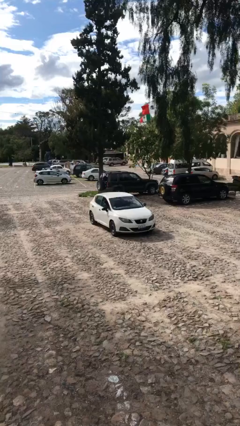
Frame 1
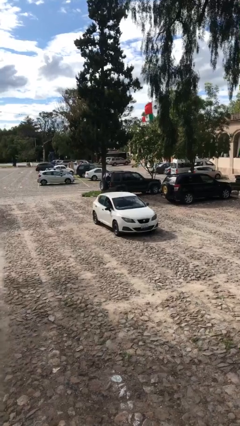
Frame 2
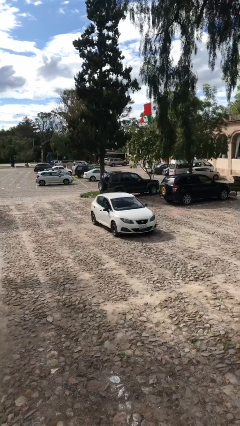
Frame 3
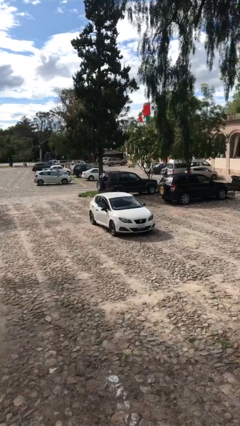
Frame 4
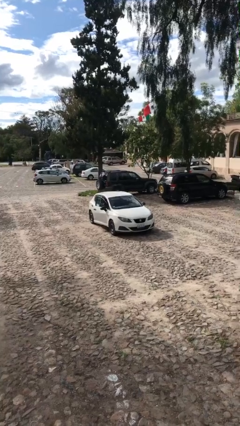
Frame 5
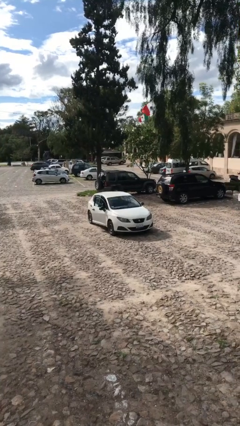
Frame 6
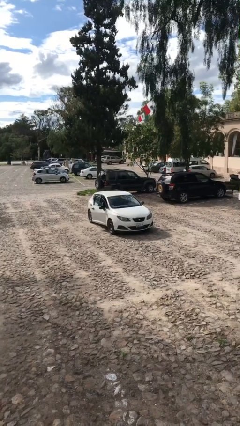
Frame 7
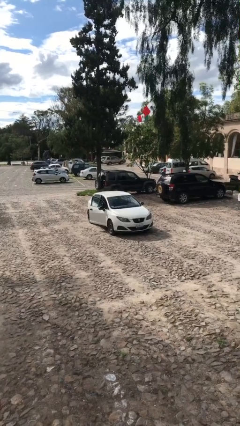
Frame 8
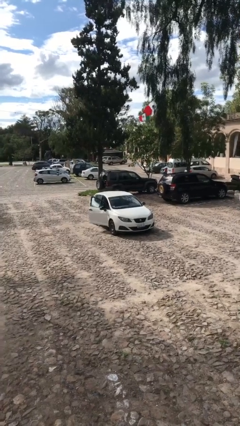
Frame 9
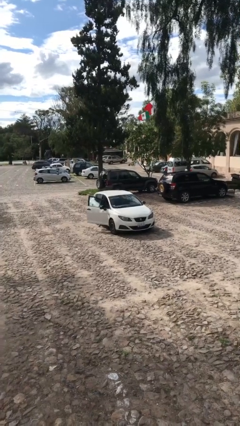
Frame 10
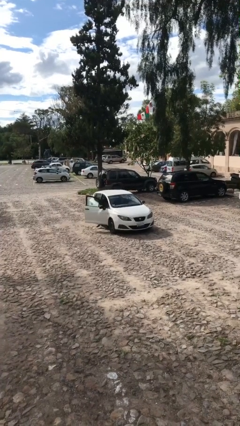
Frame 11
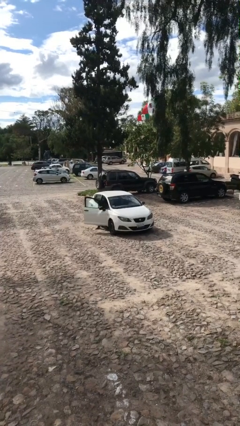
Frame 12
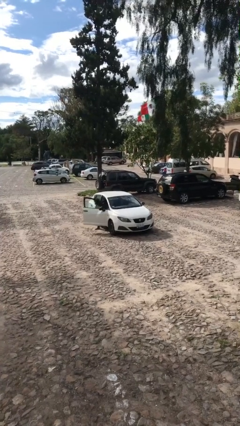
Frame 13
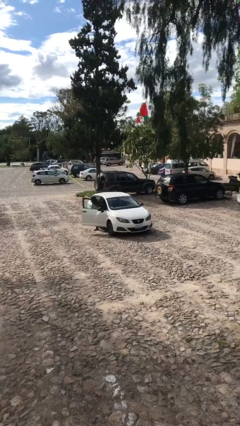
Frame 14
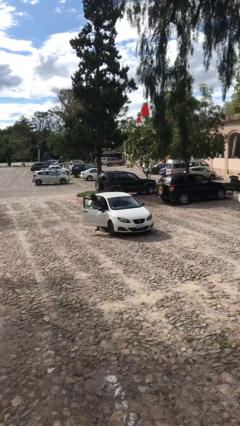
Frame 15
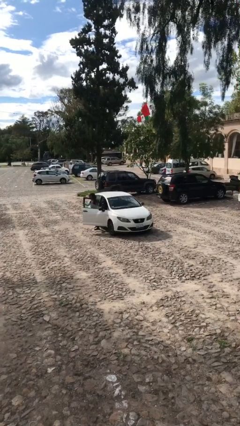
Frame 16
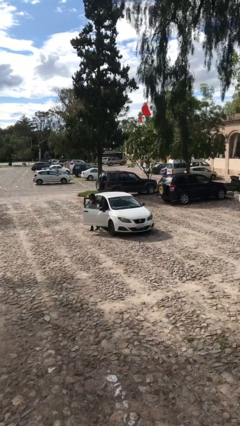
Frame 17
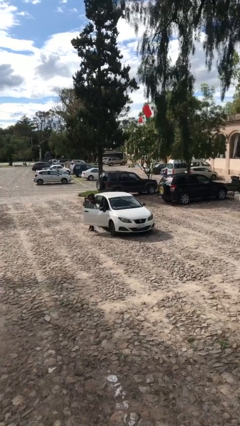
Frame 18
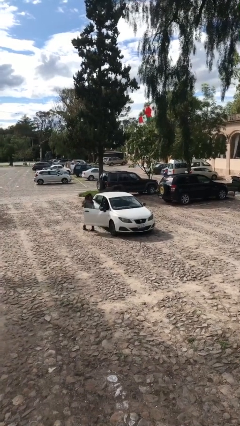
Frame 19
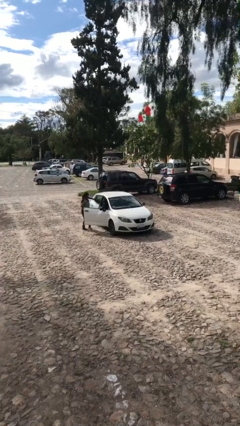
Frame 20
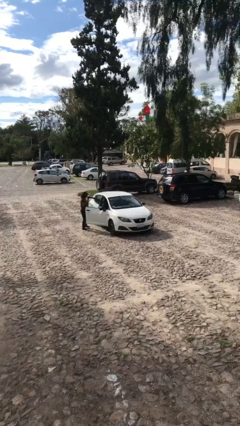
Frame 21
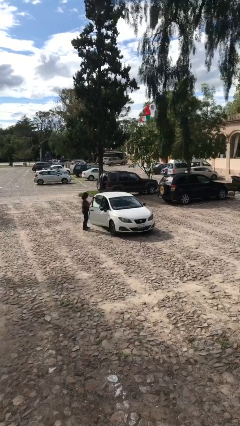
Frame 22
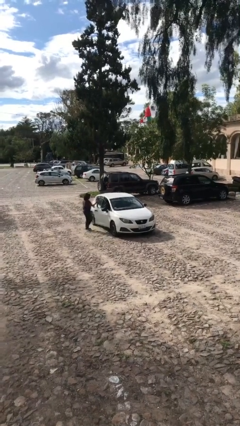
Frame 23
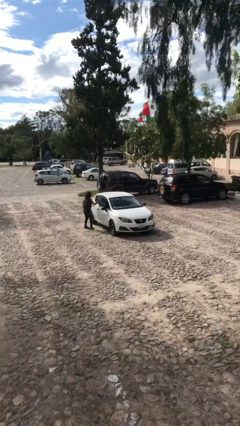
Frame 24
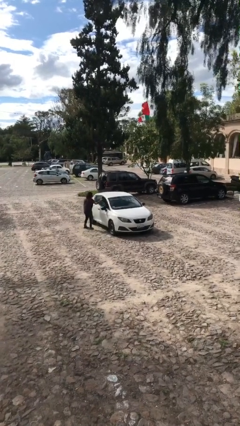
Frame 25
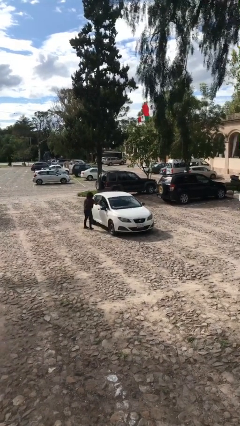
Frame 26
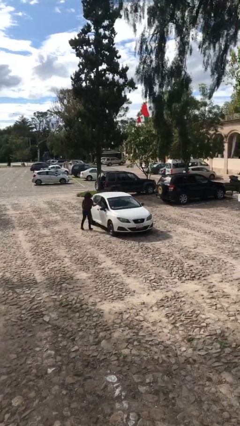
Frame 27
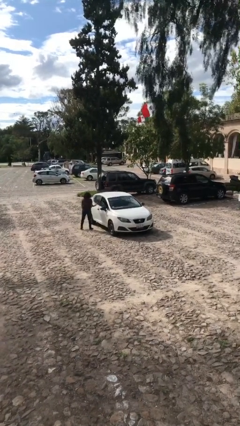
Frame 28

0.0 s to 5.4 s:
car drops off person

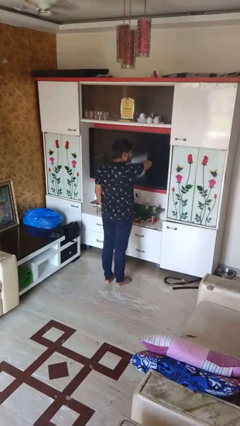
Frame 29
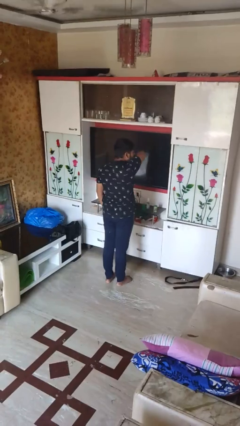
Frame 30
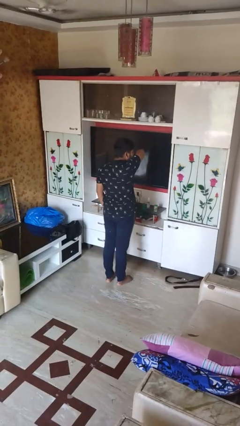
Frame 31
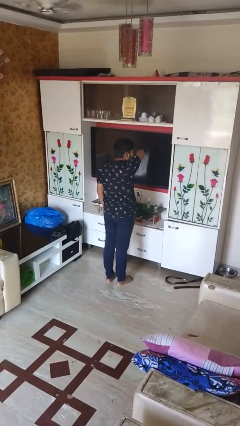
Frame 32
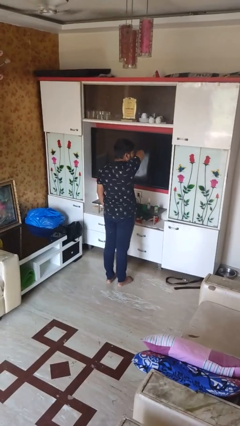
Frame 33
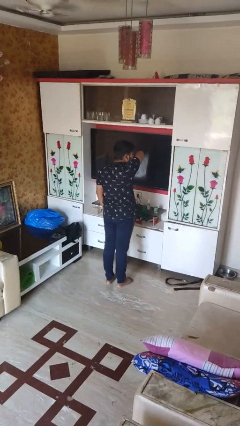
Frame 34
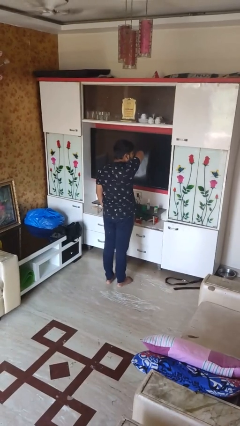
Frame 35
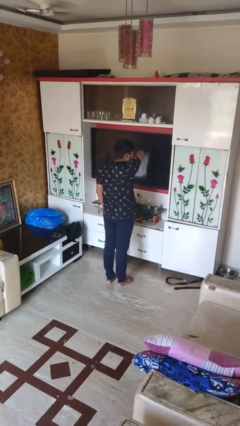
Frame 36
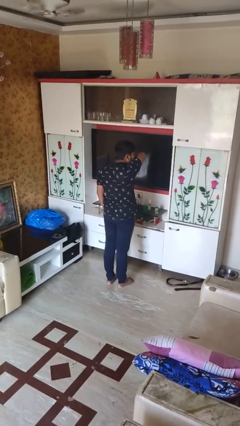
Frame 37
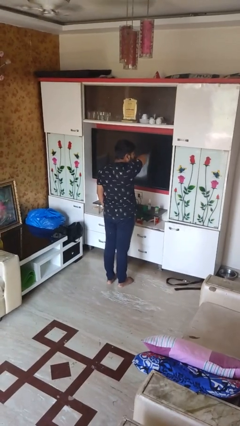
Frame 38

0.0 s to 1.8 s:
person sneezes into arm

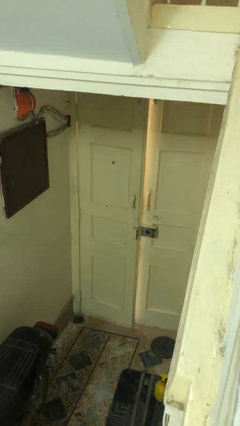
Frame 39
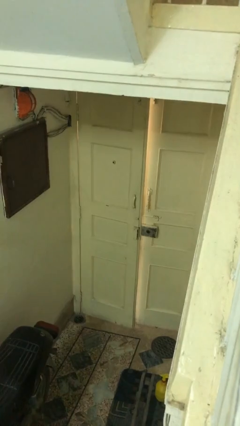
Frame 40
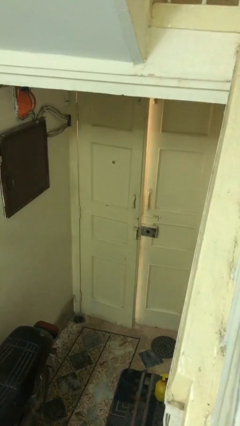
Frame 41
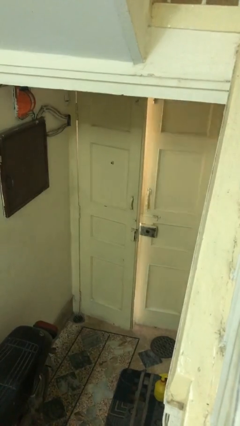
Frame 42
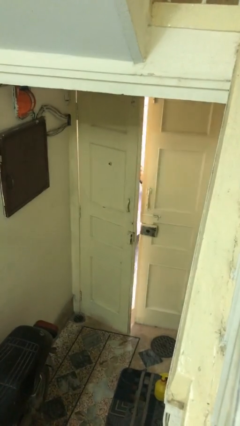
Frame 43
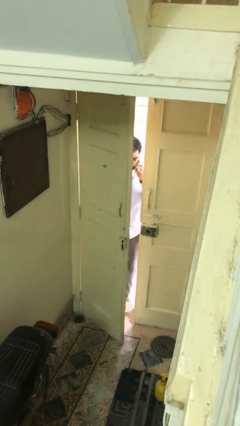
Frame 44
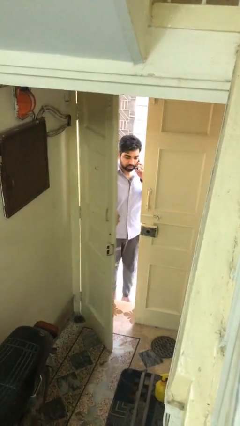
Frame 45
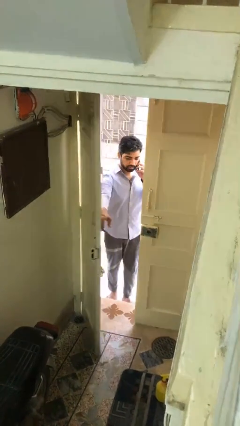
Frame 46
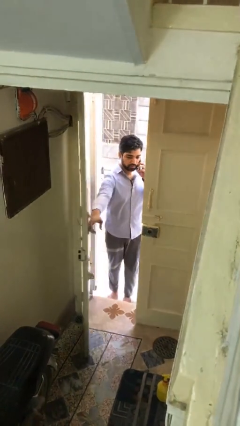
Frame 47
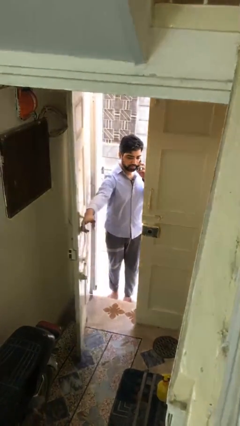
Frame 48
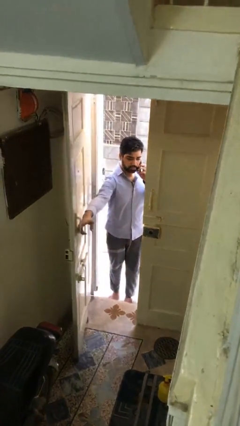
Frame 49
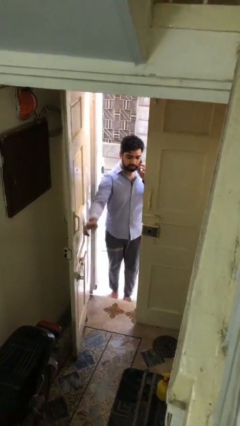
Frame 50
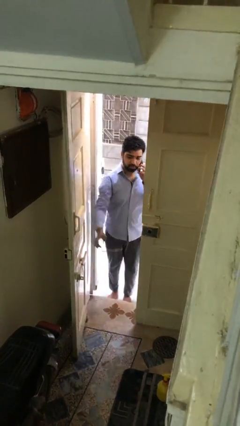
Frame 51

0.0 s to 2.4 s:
person opens facility door

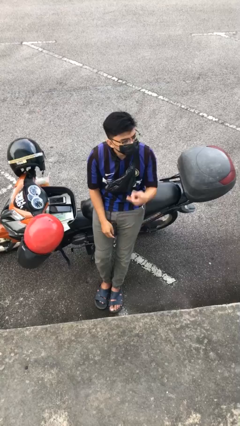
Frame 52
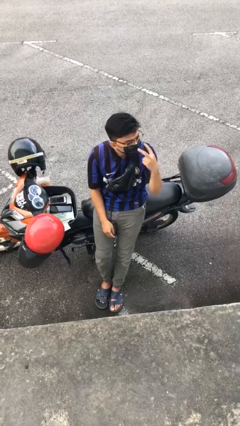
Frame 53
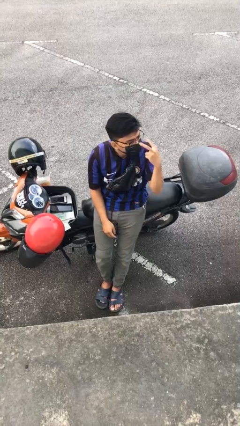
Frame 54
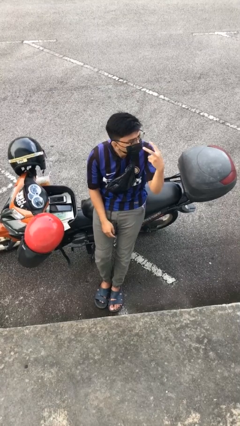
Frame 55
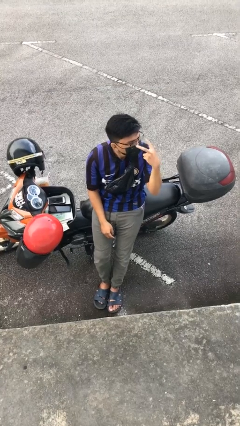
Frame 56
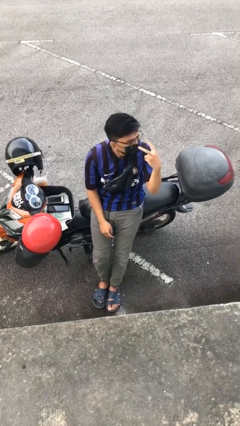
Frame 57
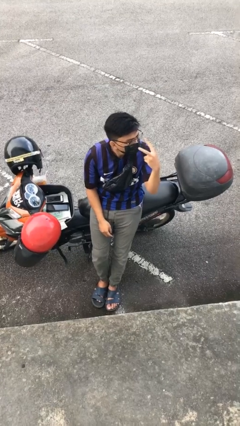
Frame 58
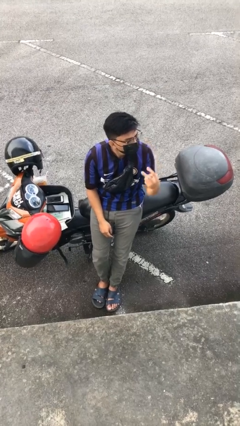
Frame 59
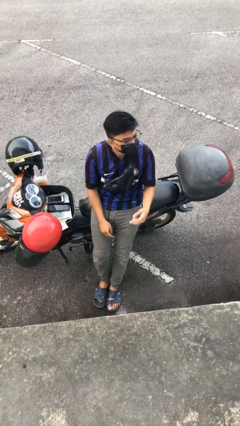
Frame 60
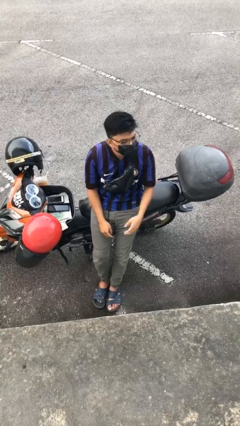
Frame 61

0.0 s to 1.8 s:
person gestures watch closely

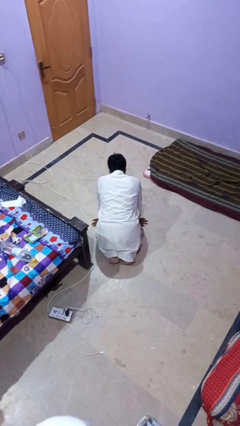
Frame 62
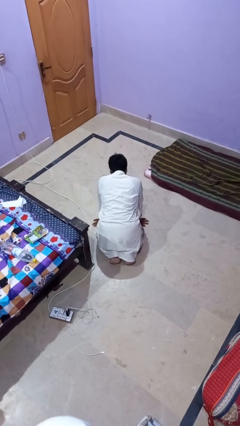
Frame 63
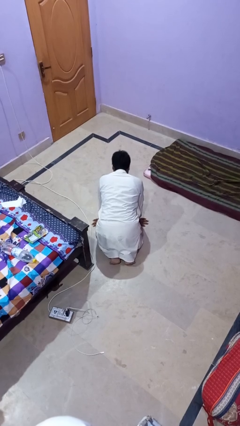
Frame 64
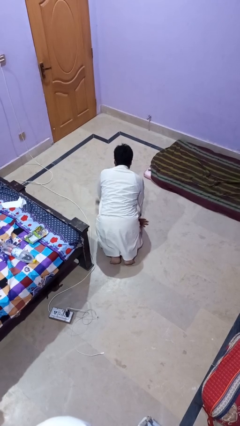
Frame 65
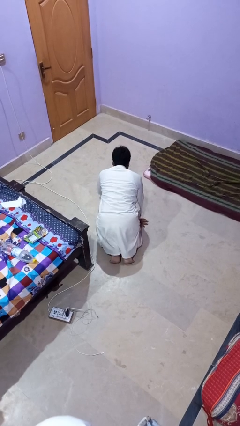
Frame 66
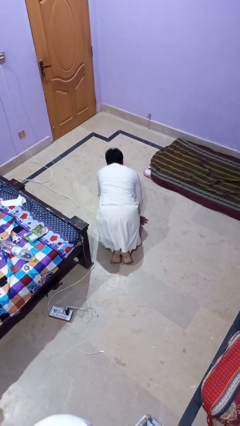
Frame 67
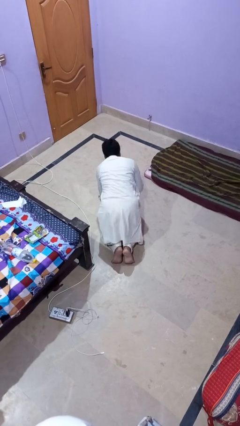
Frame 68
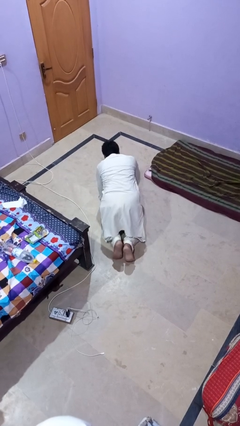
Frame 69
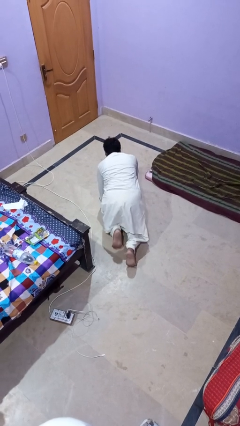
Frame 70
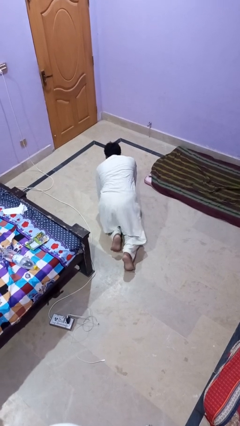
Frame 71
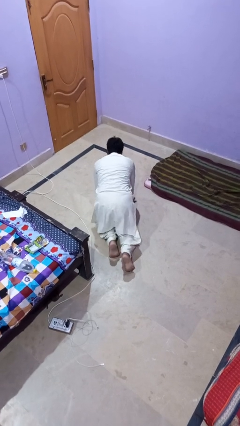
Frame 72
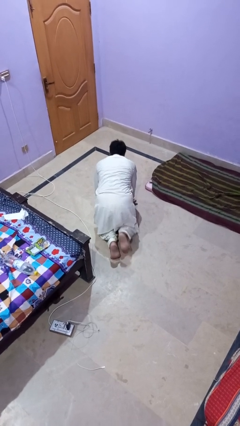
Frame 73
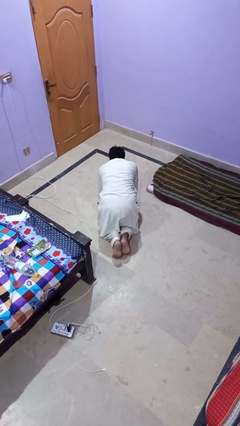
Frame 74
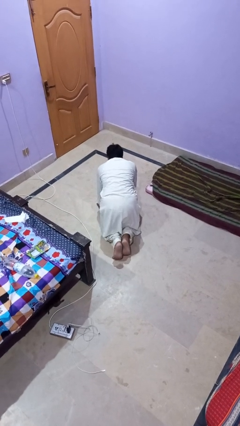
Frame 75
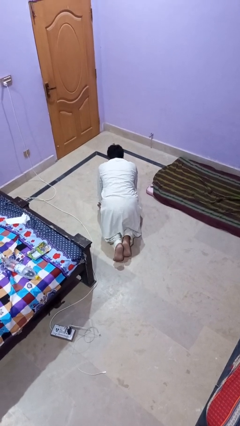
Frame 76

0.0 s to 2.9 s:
person crawls

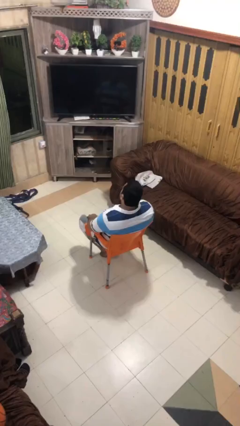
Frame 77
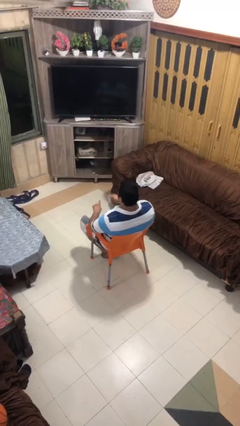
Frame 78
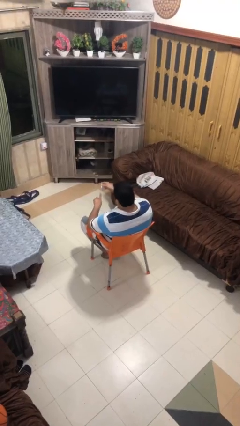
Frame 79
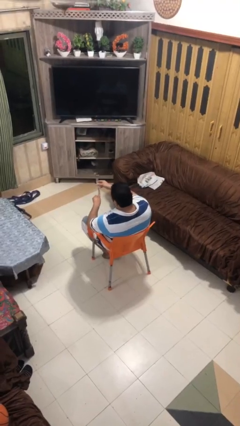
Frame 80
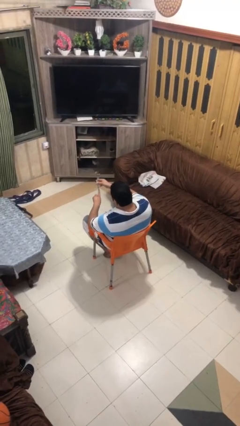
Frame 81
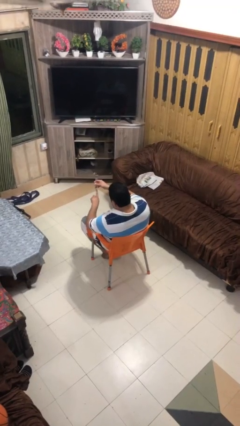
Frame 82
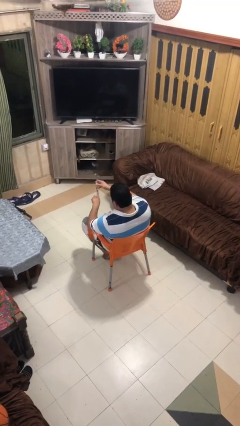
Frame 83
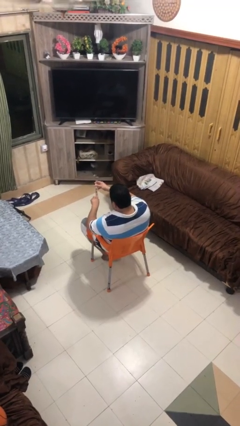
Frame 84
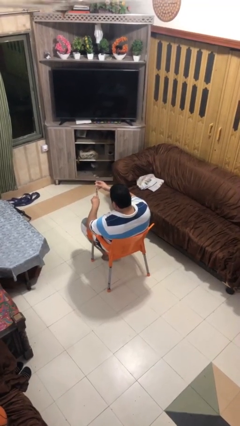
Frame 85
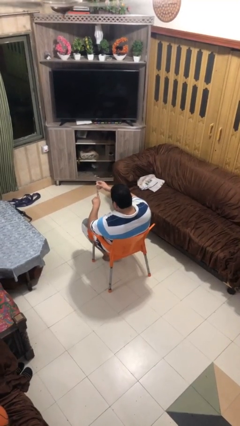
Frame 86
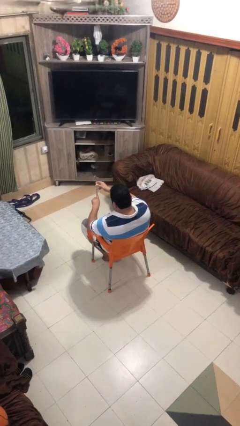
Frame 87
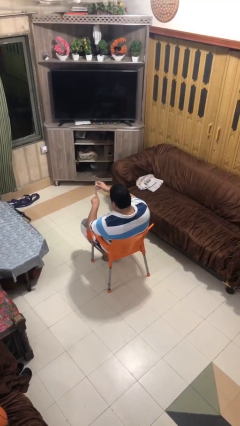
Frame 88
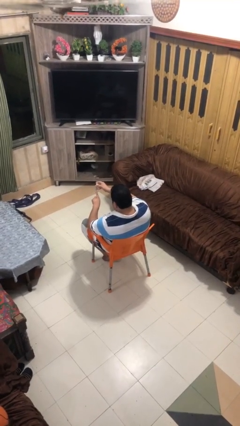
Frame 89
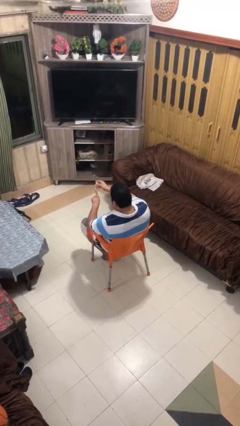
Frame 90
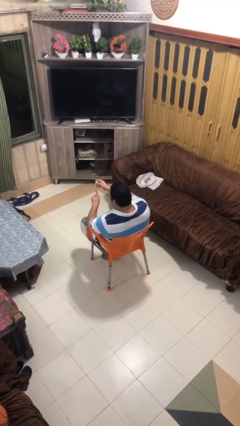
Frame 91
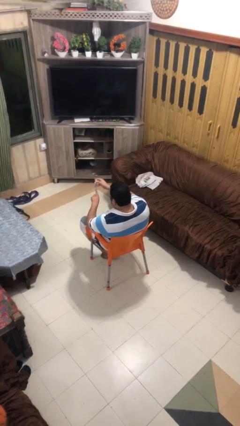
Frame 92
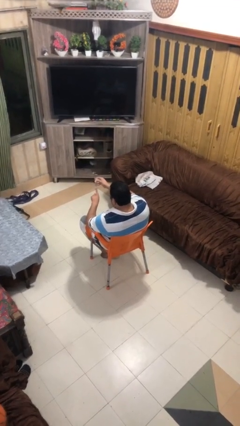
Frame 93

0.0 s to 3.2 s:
person clips fingernails
